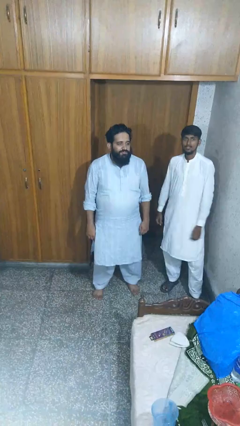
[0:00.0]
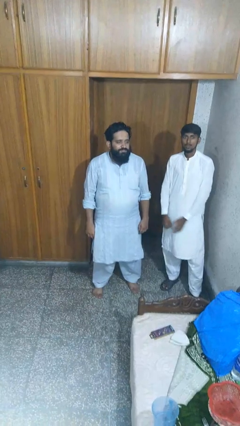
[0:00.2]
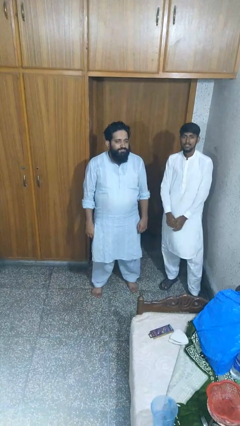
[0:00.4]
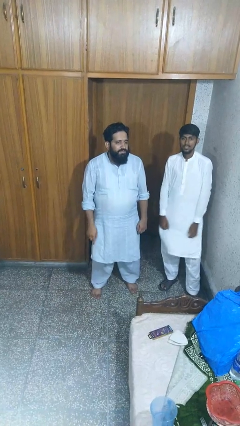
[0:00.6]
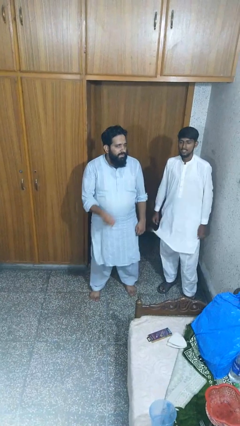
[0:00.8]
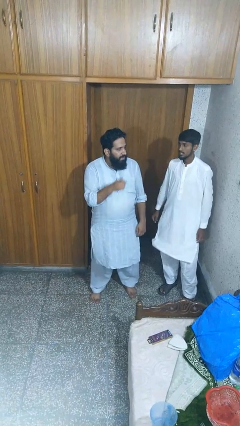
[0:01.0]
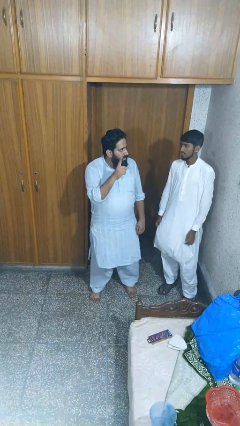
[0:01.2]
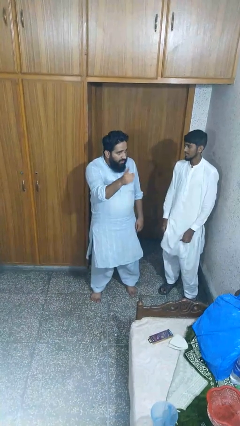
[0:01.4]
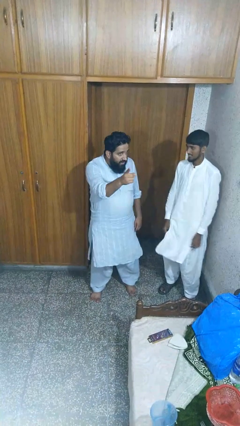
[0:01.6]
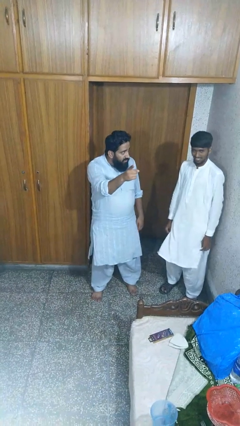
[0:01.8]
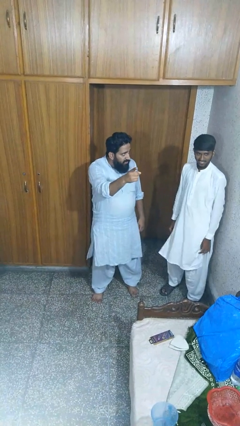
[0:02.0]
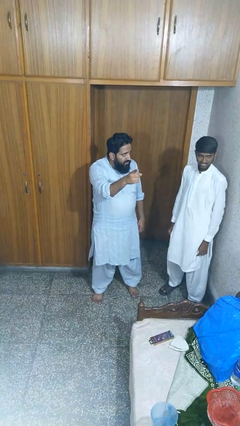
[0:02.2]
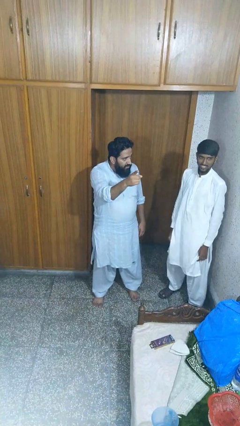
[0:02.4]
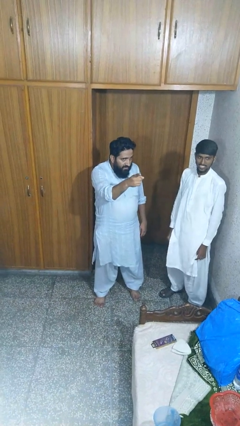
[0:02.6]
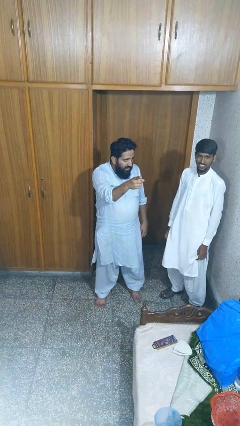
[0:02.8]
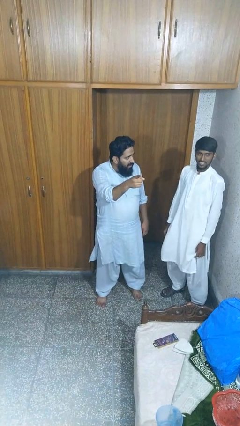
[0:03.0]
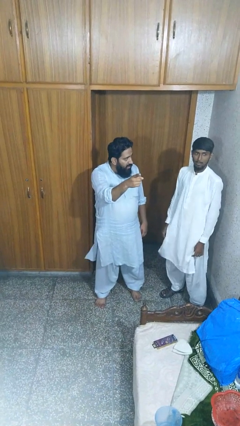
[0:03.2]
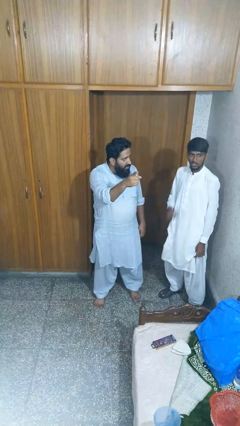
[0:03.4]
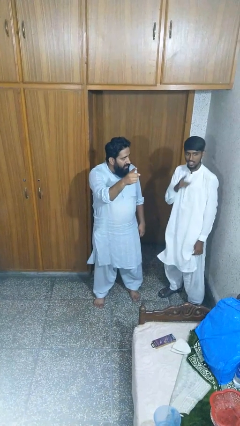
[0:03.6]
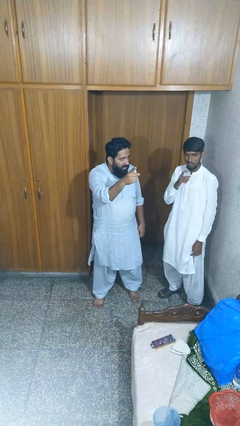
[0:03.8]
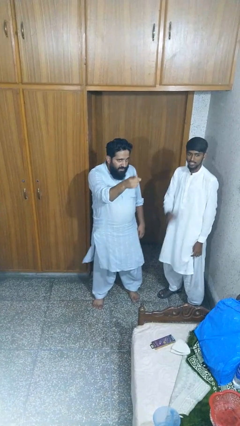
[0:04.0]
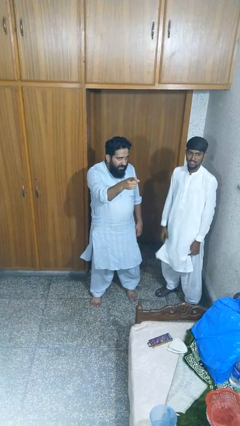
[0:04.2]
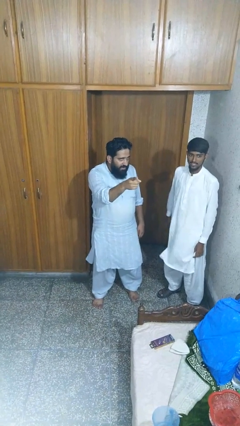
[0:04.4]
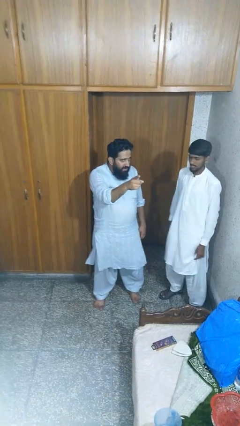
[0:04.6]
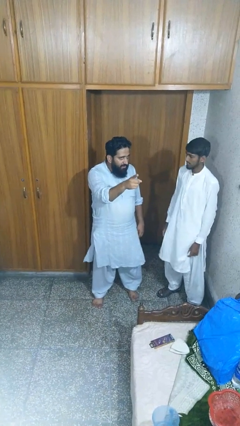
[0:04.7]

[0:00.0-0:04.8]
person points at person

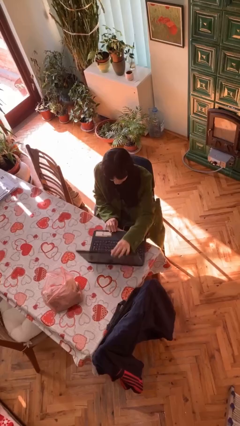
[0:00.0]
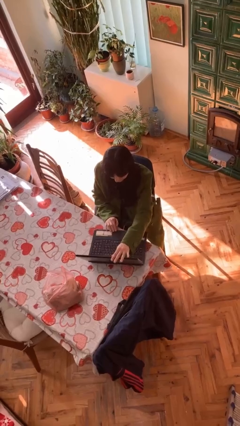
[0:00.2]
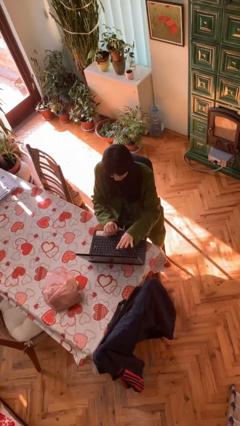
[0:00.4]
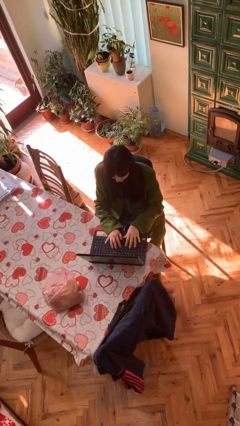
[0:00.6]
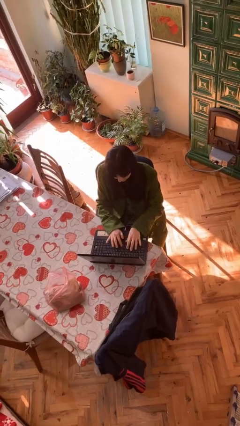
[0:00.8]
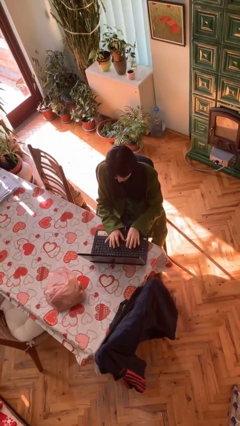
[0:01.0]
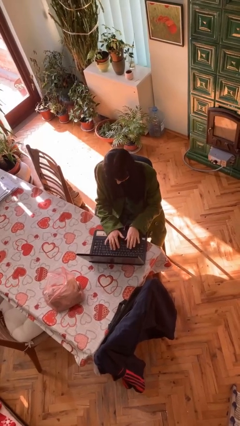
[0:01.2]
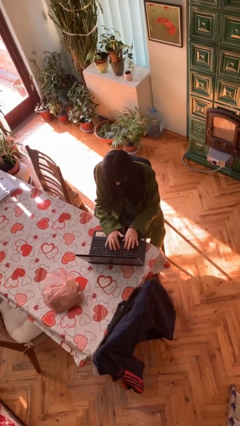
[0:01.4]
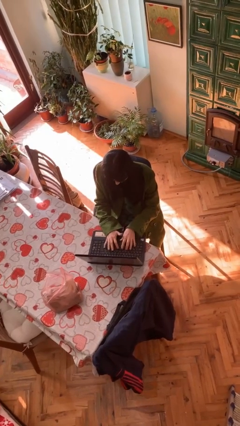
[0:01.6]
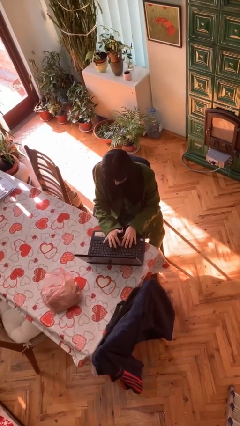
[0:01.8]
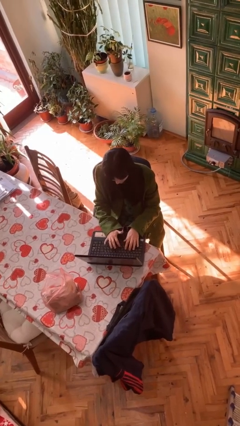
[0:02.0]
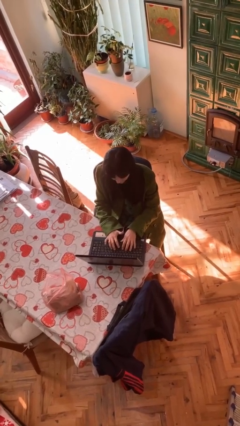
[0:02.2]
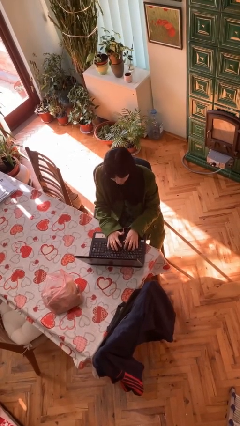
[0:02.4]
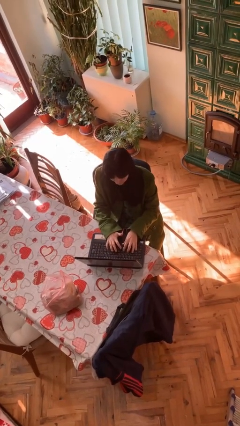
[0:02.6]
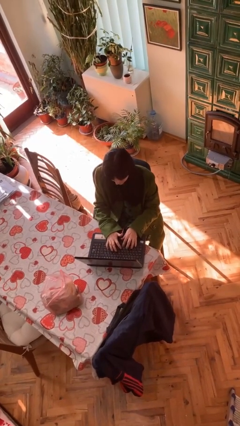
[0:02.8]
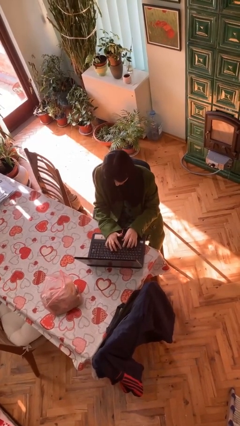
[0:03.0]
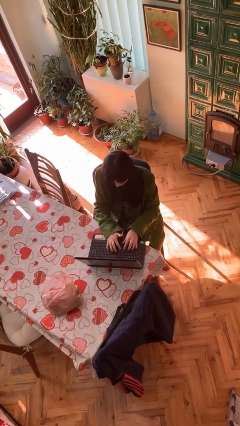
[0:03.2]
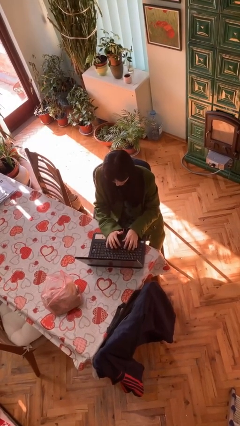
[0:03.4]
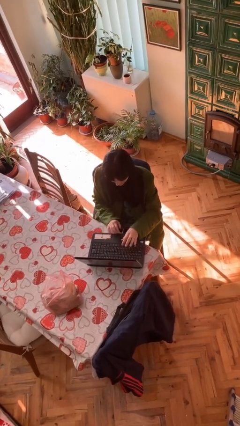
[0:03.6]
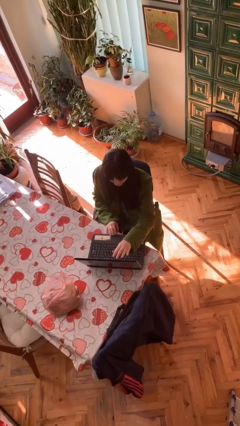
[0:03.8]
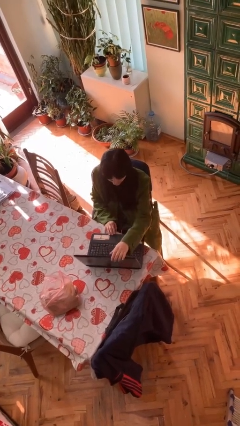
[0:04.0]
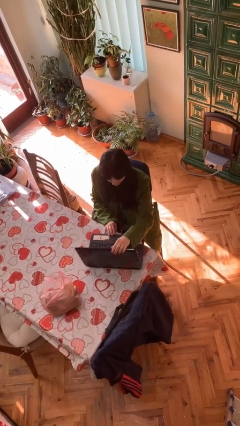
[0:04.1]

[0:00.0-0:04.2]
person interacts with laptop

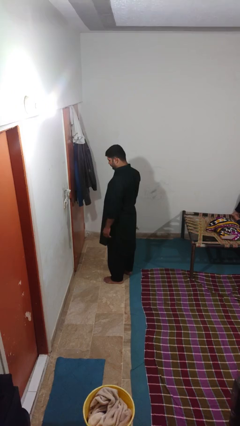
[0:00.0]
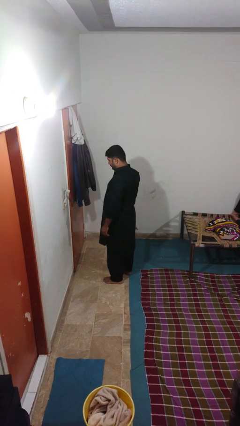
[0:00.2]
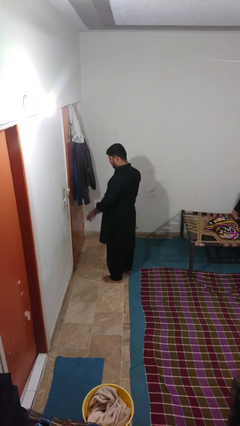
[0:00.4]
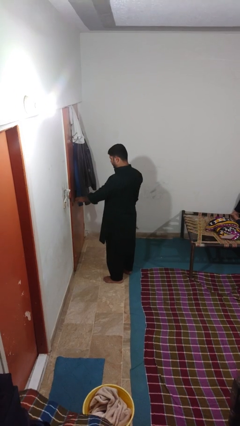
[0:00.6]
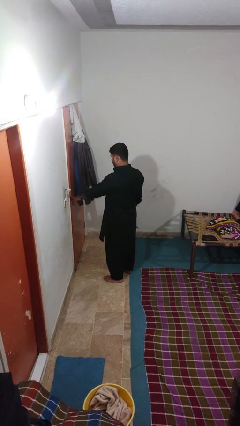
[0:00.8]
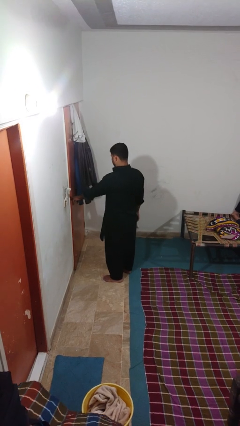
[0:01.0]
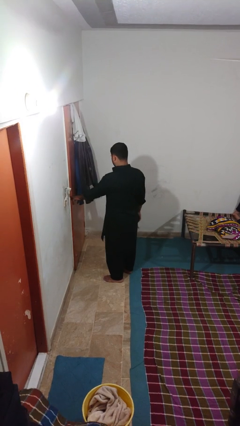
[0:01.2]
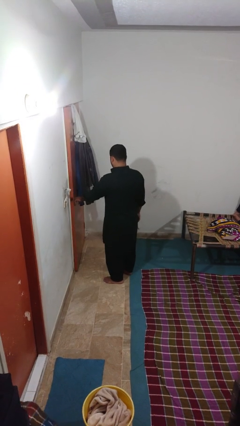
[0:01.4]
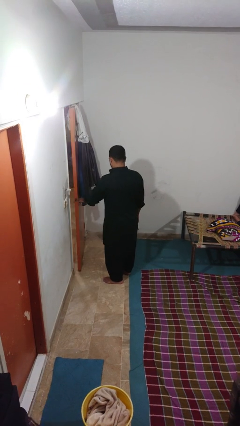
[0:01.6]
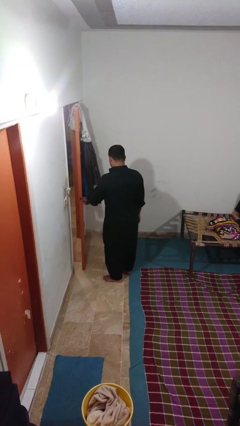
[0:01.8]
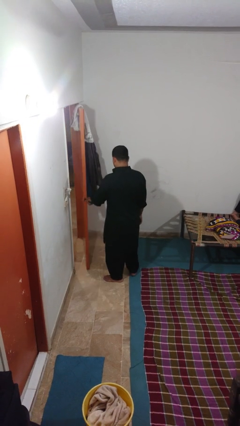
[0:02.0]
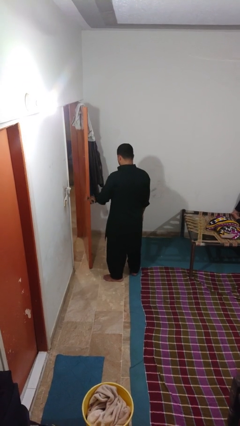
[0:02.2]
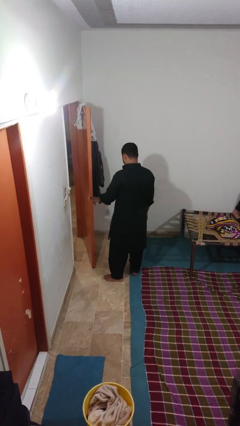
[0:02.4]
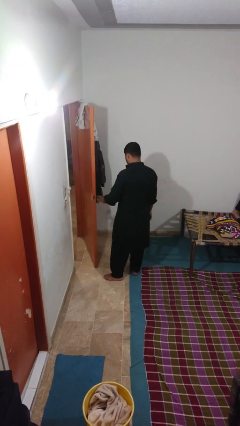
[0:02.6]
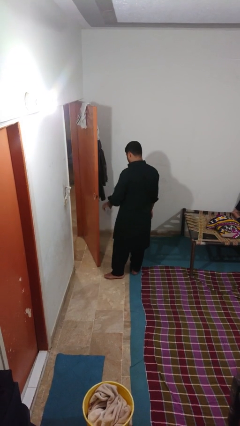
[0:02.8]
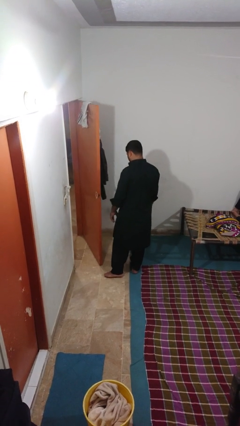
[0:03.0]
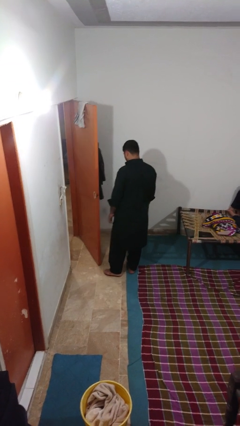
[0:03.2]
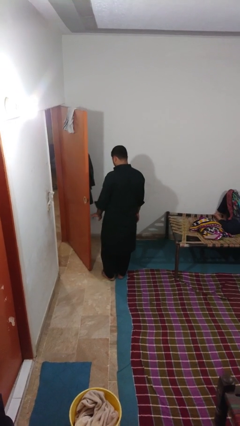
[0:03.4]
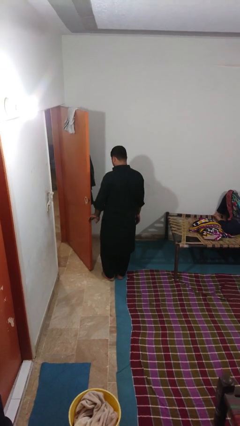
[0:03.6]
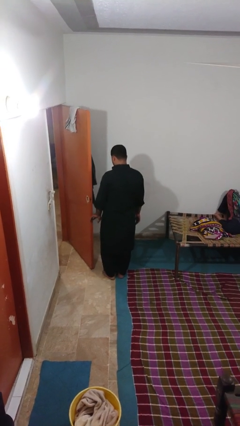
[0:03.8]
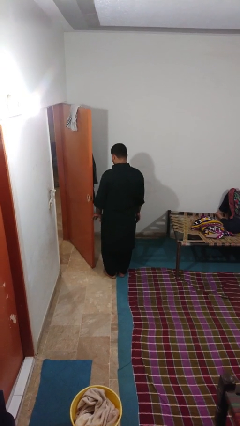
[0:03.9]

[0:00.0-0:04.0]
person opens facility door

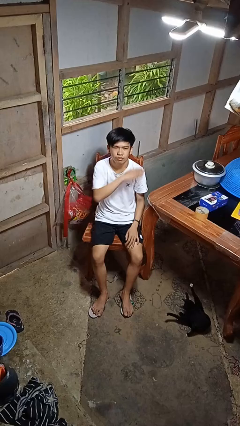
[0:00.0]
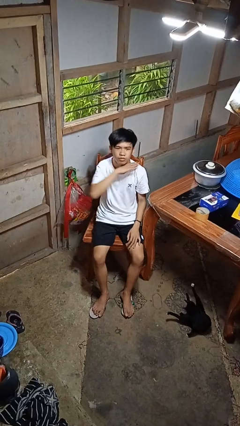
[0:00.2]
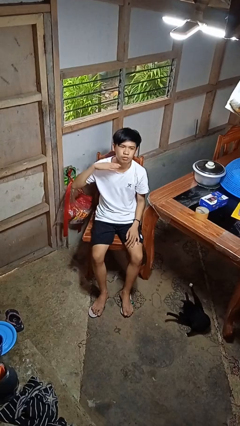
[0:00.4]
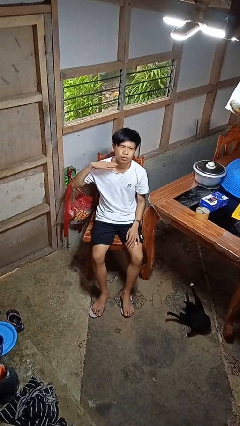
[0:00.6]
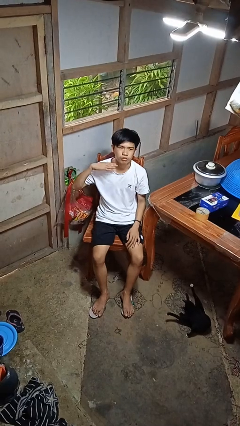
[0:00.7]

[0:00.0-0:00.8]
person gestures cut

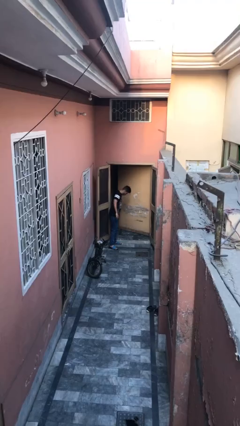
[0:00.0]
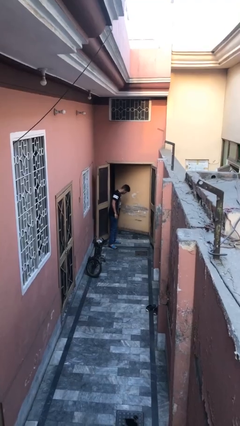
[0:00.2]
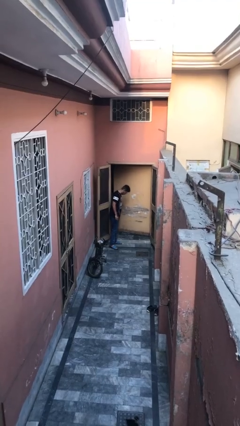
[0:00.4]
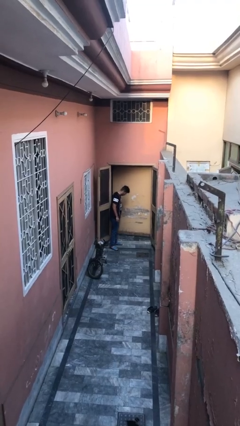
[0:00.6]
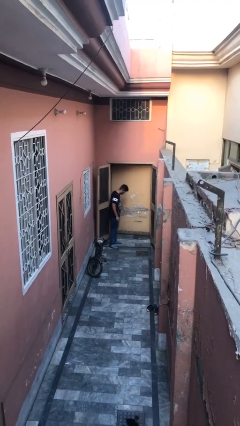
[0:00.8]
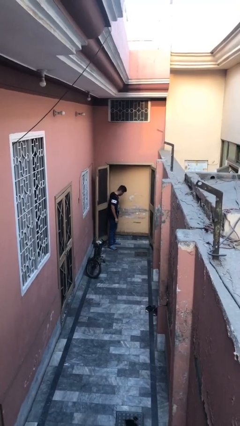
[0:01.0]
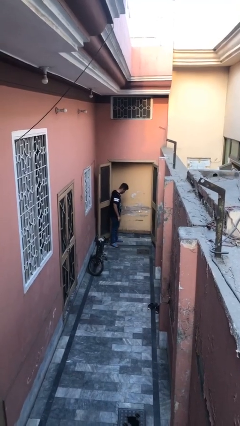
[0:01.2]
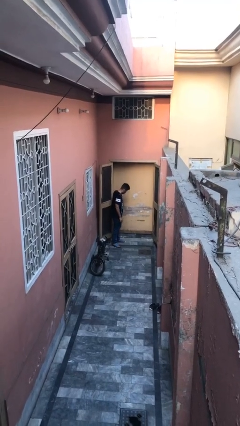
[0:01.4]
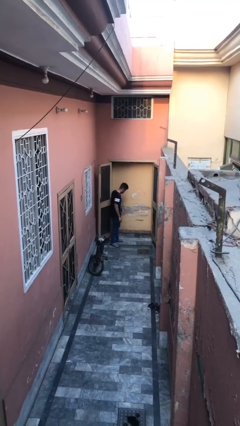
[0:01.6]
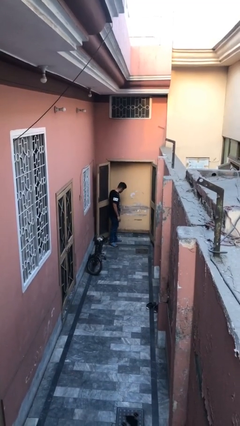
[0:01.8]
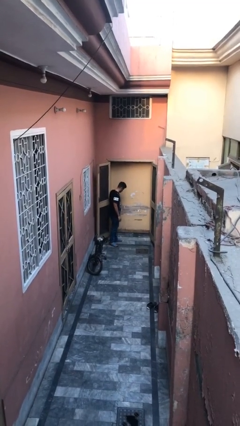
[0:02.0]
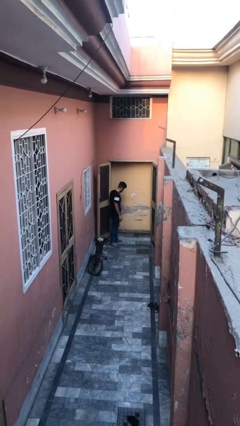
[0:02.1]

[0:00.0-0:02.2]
person closes facility door

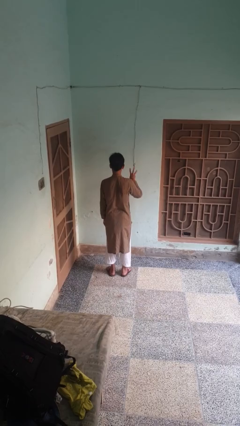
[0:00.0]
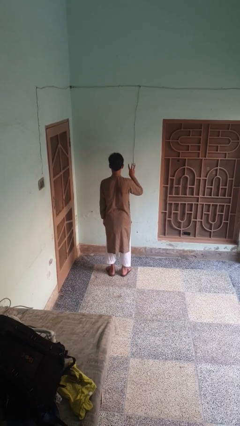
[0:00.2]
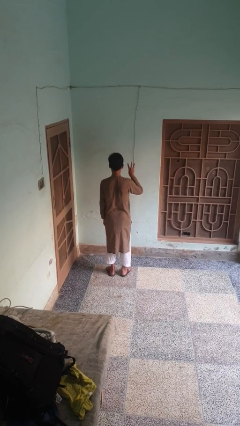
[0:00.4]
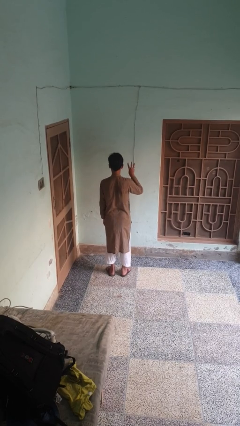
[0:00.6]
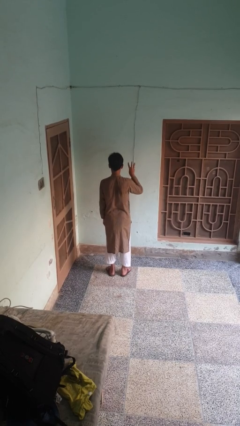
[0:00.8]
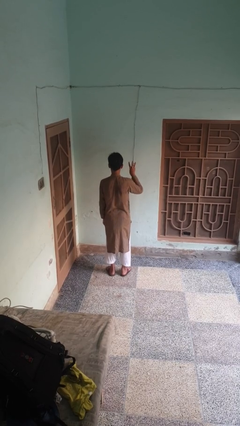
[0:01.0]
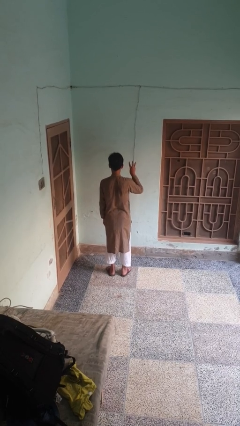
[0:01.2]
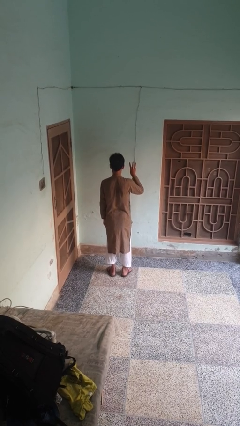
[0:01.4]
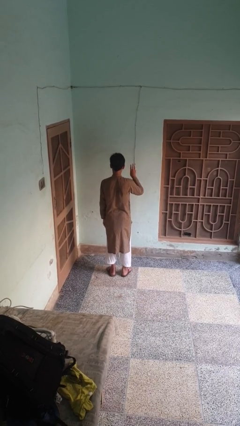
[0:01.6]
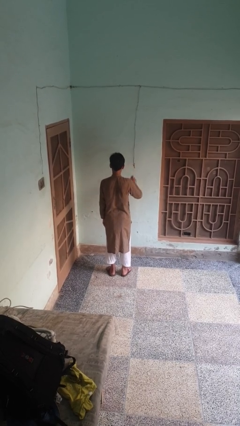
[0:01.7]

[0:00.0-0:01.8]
person gestures number three
